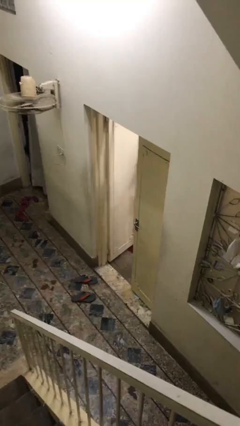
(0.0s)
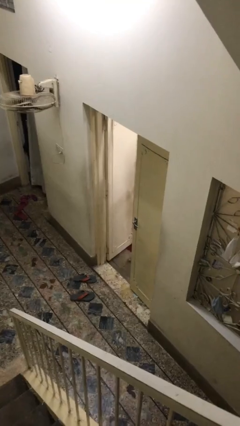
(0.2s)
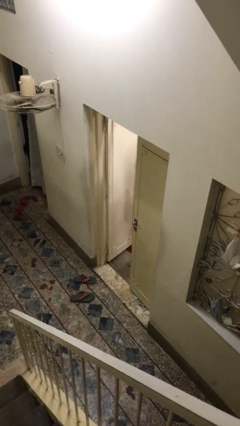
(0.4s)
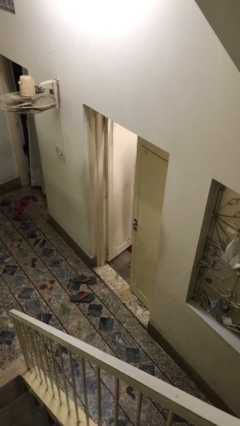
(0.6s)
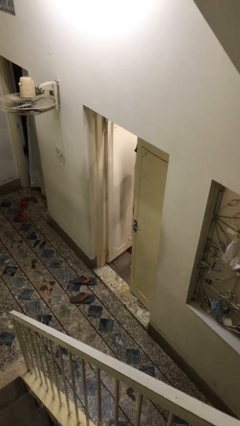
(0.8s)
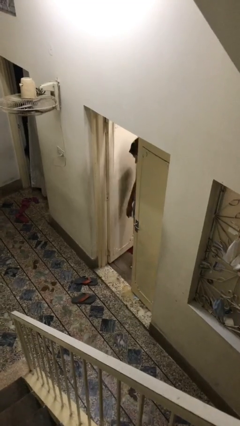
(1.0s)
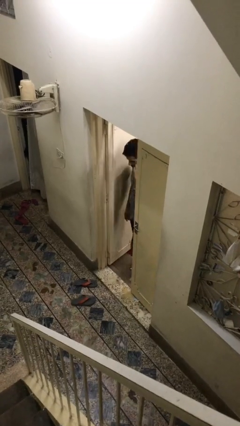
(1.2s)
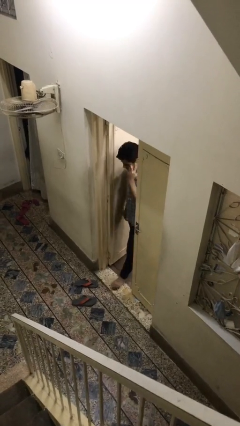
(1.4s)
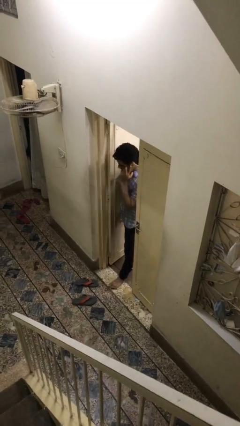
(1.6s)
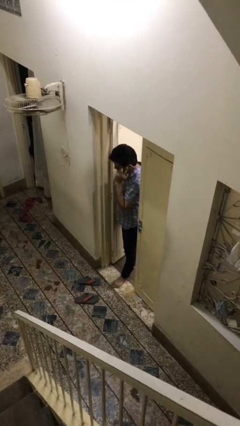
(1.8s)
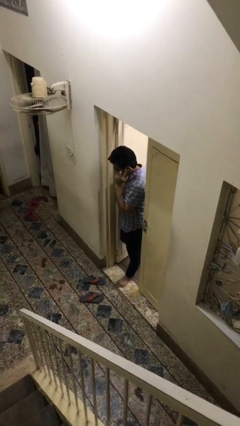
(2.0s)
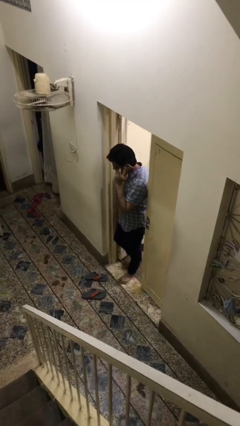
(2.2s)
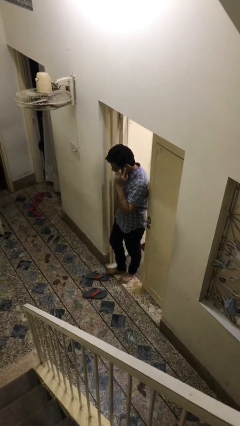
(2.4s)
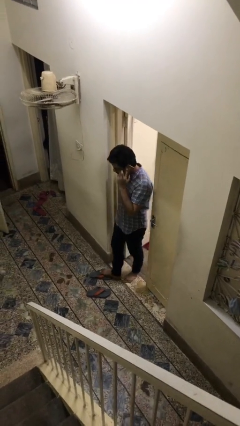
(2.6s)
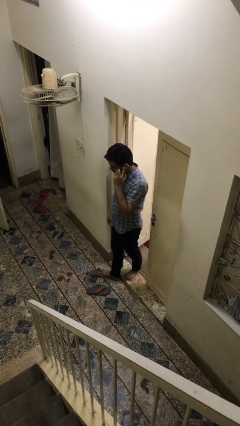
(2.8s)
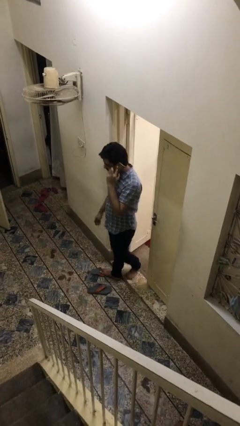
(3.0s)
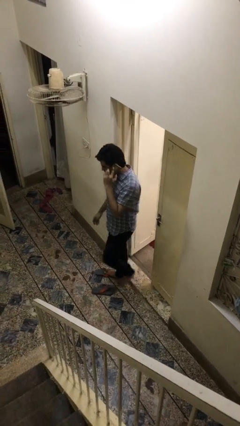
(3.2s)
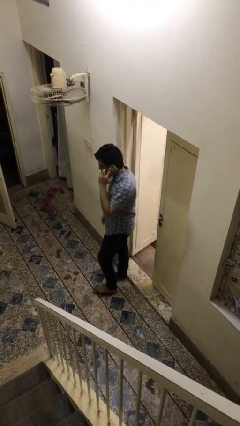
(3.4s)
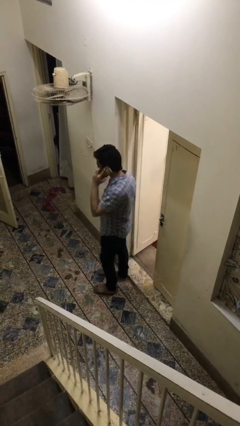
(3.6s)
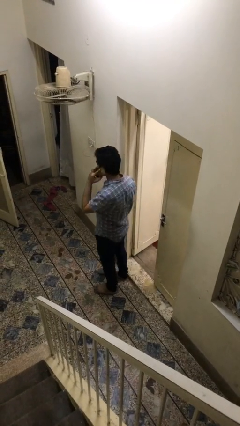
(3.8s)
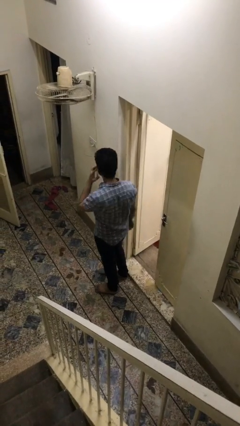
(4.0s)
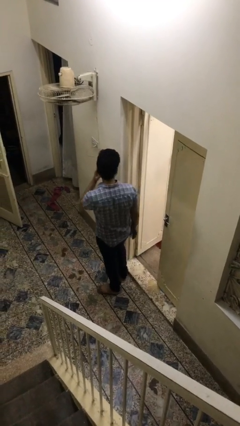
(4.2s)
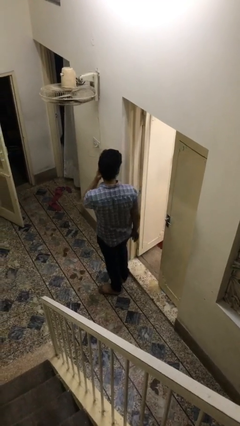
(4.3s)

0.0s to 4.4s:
person enters scene through structure

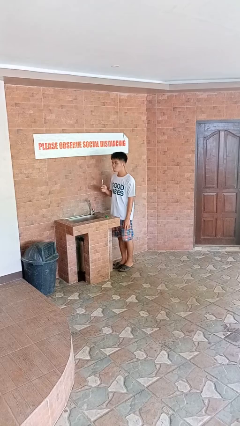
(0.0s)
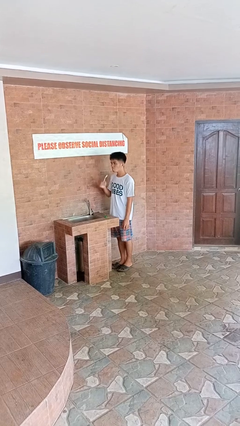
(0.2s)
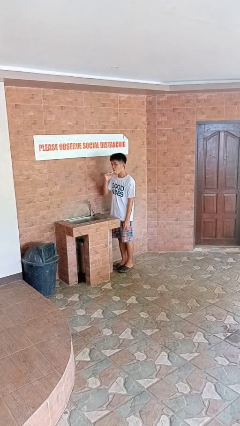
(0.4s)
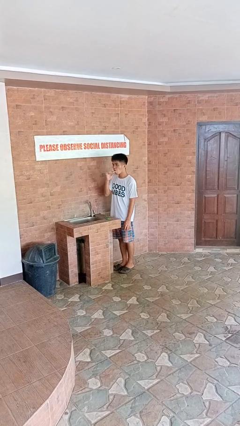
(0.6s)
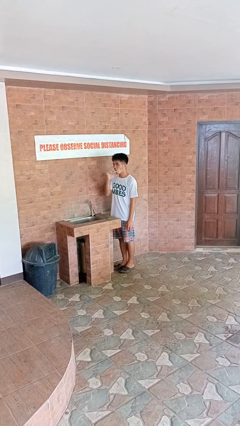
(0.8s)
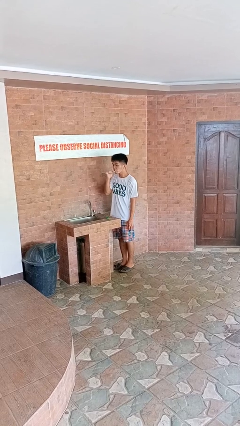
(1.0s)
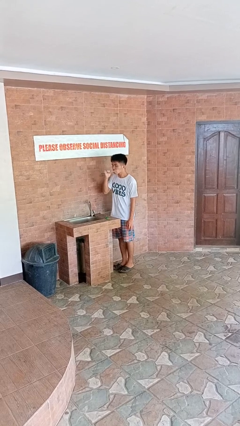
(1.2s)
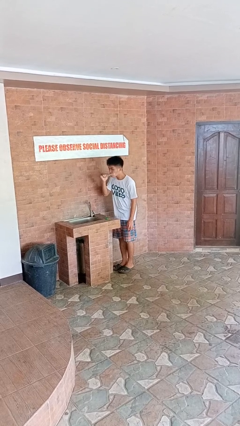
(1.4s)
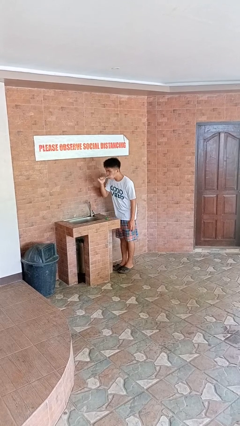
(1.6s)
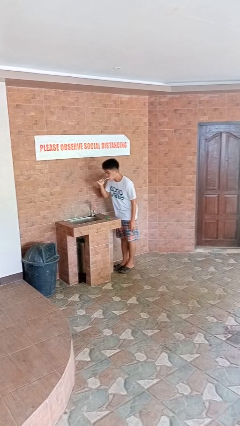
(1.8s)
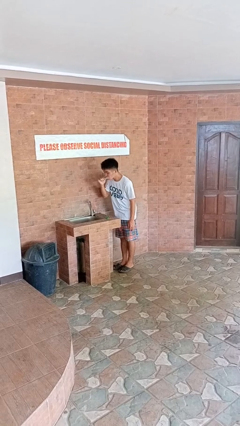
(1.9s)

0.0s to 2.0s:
person brushes teeth

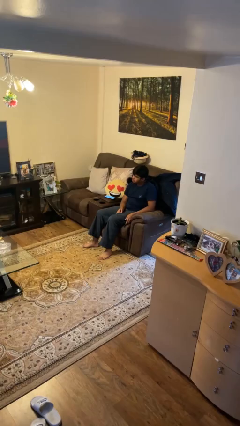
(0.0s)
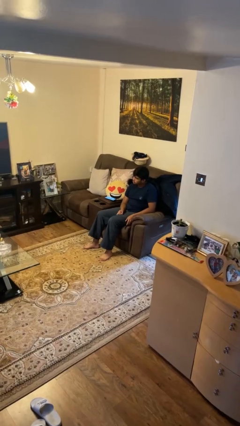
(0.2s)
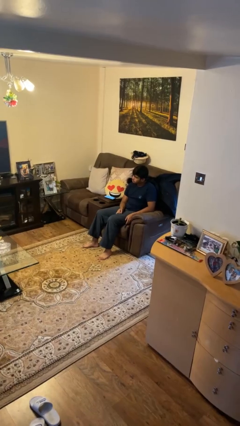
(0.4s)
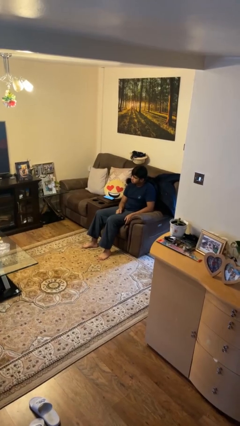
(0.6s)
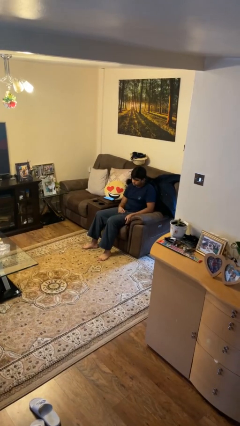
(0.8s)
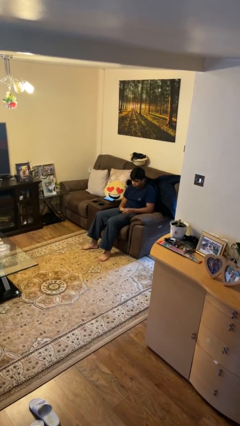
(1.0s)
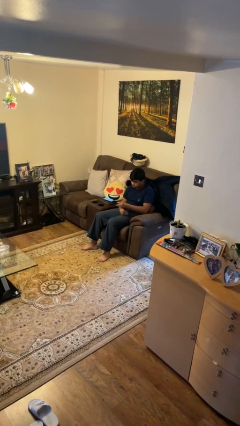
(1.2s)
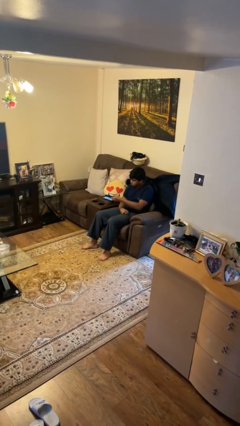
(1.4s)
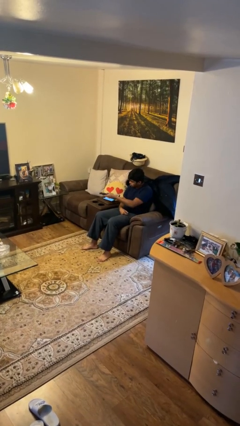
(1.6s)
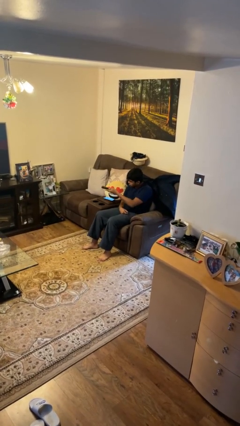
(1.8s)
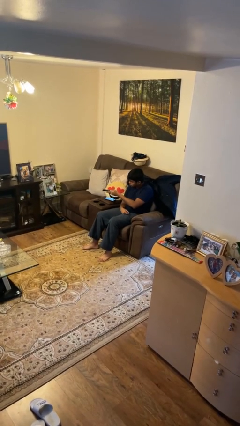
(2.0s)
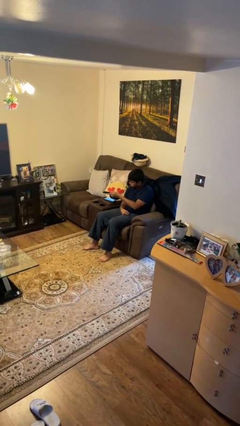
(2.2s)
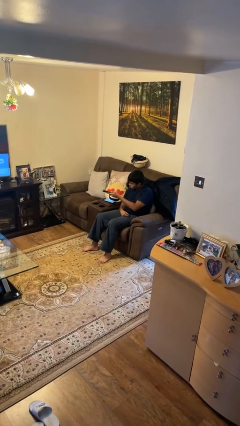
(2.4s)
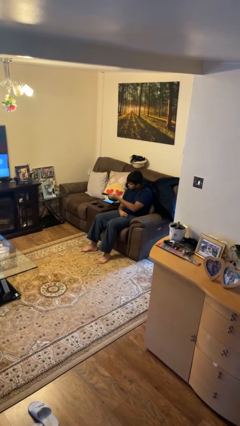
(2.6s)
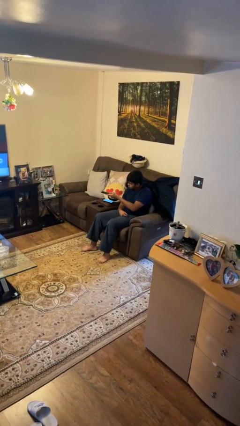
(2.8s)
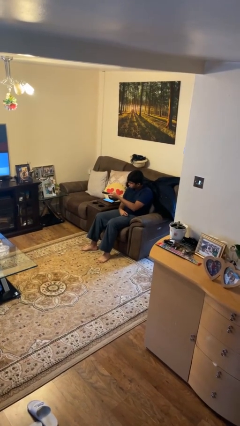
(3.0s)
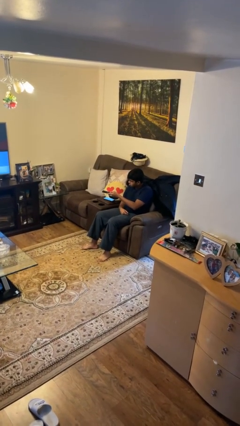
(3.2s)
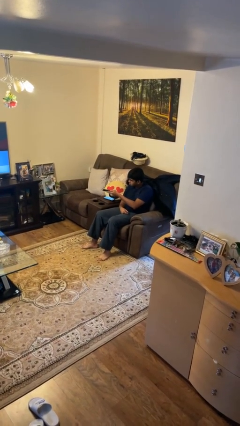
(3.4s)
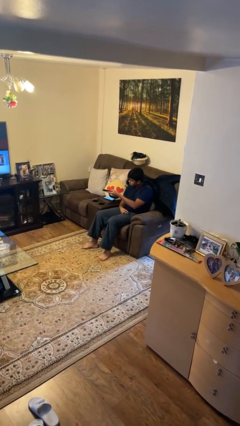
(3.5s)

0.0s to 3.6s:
person uses television remote

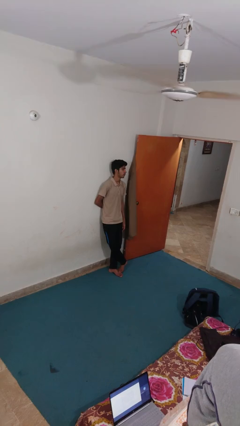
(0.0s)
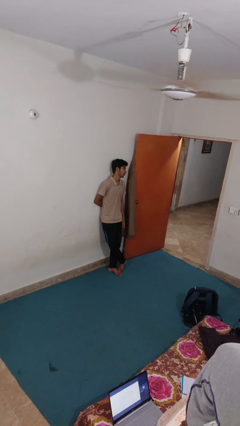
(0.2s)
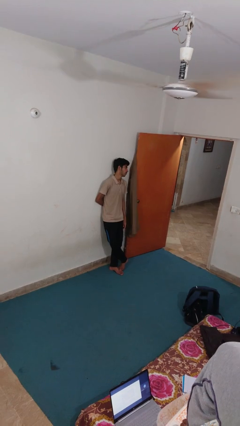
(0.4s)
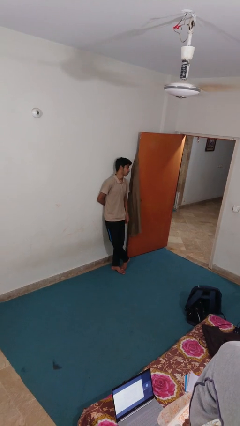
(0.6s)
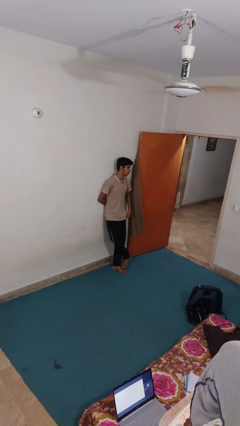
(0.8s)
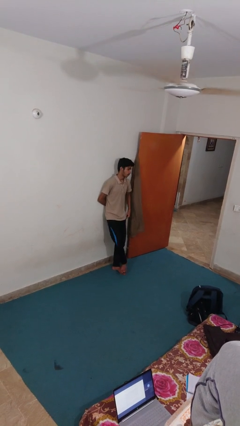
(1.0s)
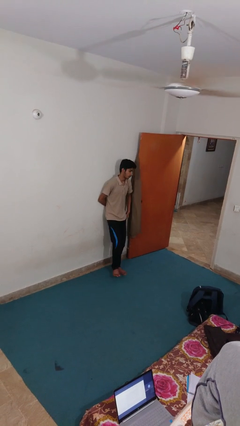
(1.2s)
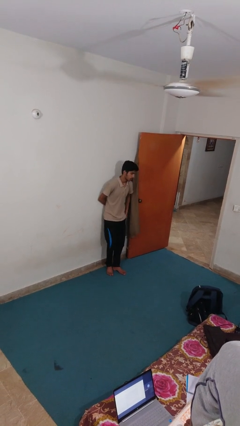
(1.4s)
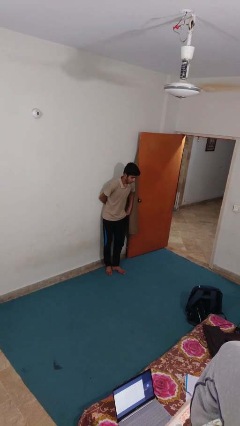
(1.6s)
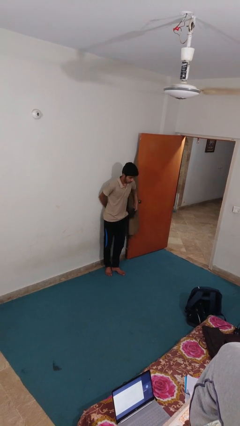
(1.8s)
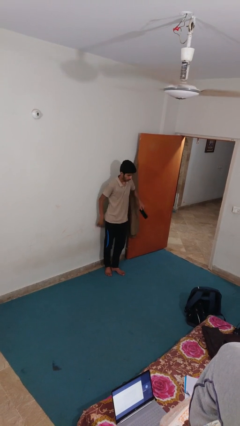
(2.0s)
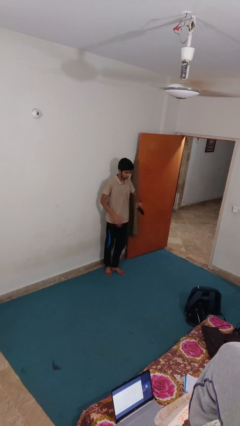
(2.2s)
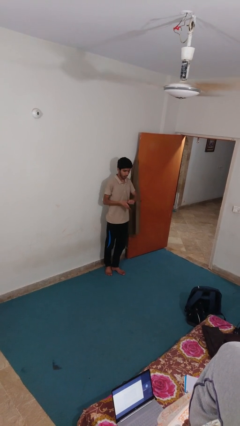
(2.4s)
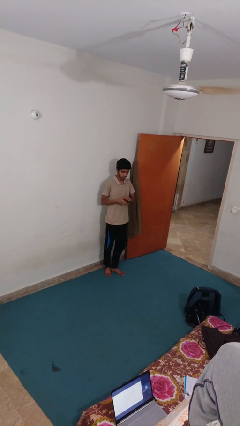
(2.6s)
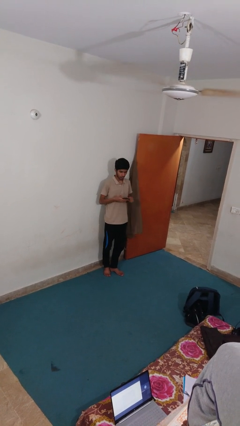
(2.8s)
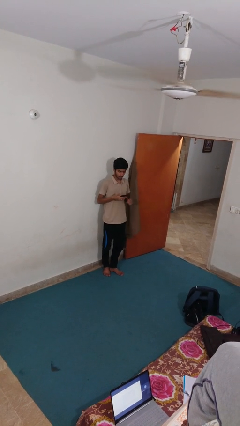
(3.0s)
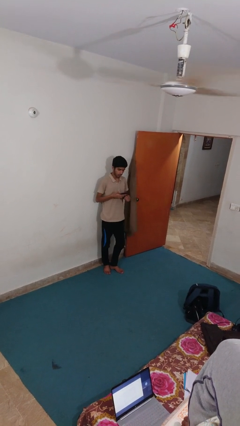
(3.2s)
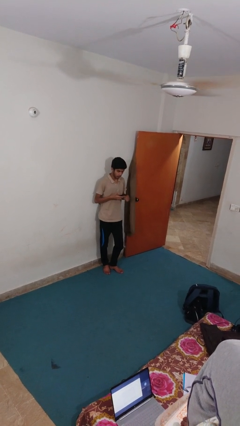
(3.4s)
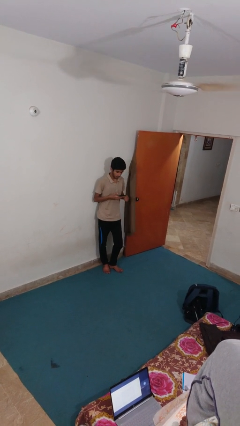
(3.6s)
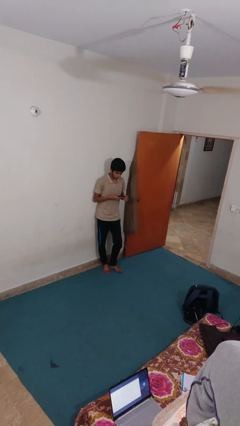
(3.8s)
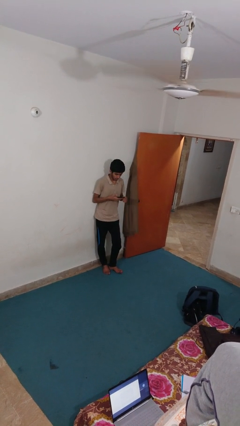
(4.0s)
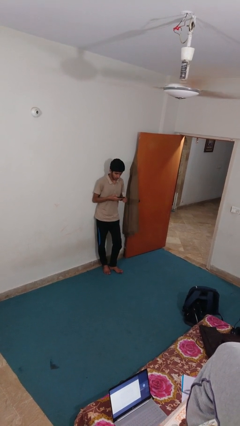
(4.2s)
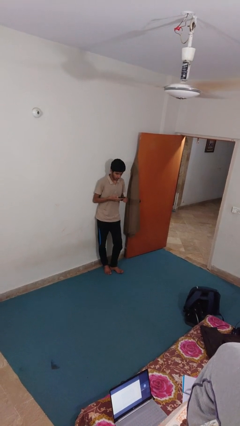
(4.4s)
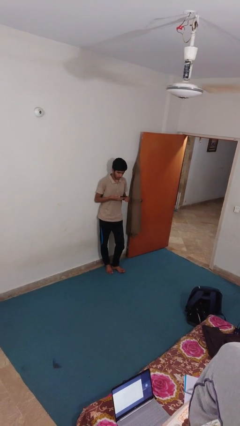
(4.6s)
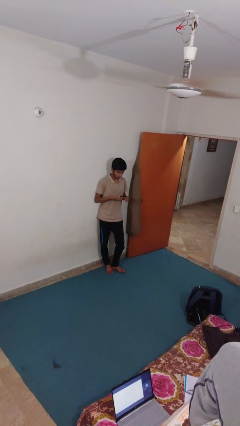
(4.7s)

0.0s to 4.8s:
person takes phone from pocket

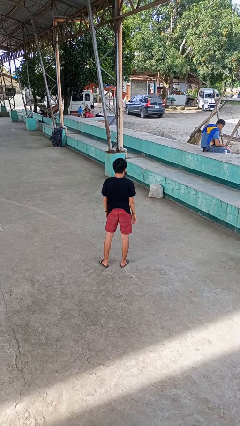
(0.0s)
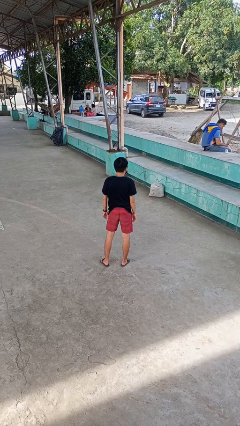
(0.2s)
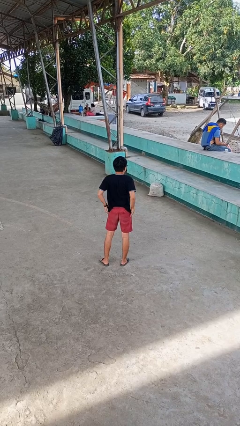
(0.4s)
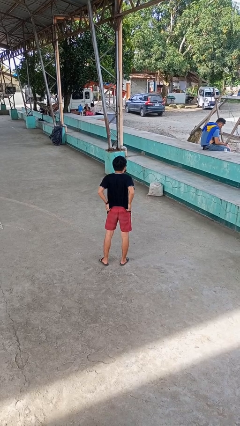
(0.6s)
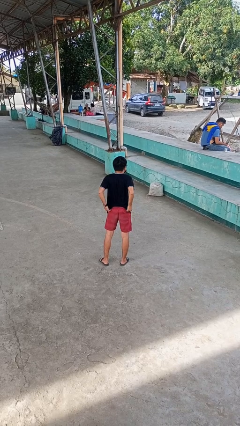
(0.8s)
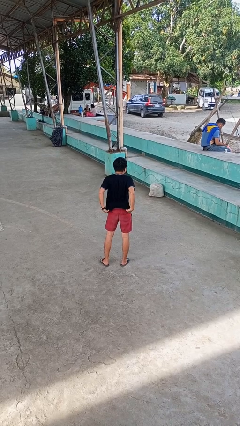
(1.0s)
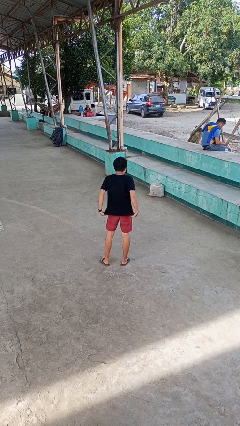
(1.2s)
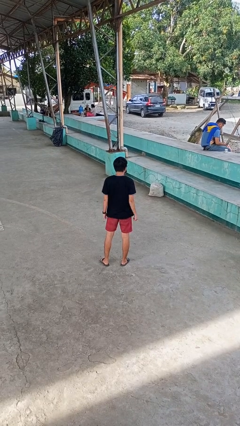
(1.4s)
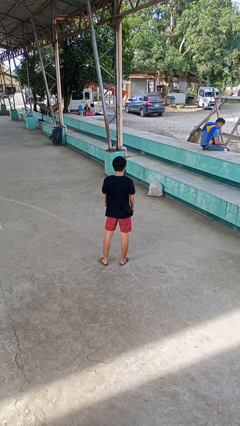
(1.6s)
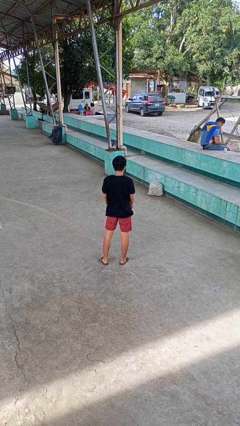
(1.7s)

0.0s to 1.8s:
person untucks shirt

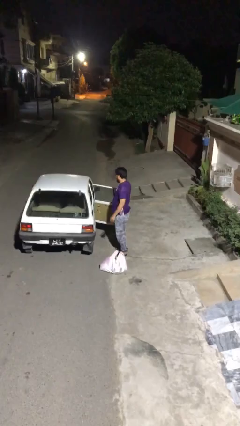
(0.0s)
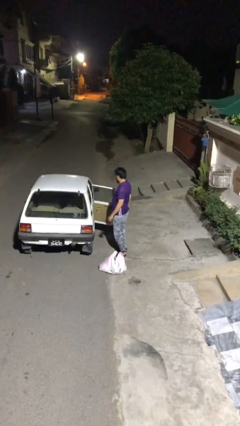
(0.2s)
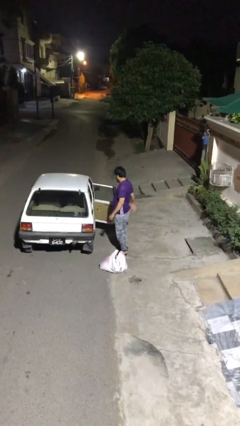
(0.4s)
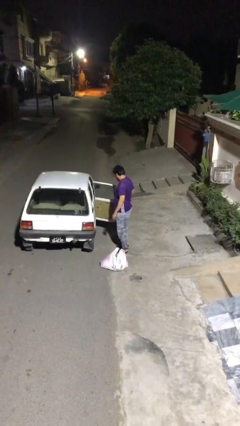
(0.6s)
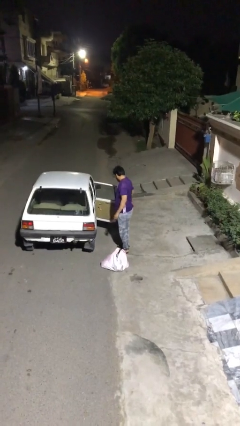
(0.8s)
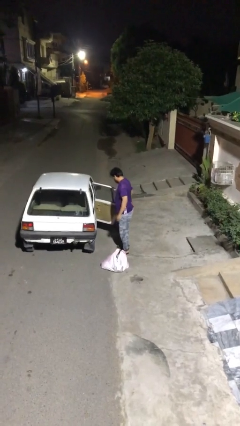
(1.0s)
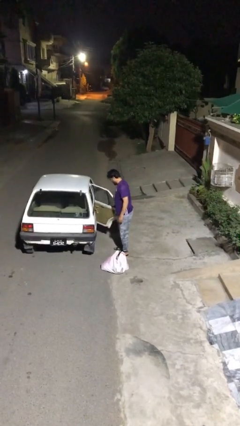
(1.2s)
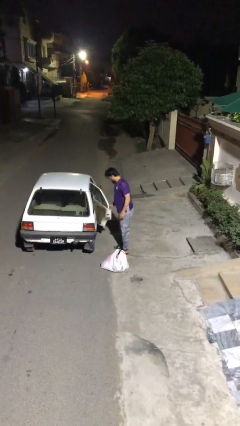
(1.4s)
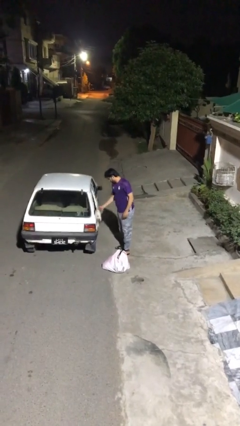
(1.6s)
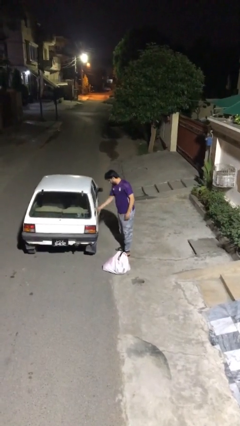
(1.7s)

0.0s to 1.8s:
person closes car door
